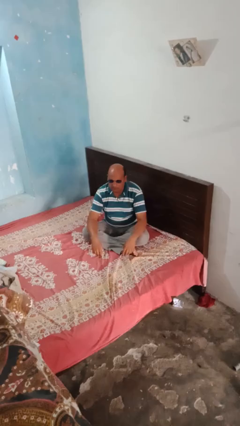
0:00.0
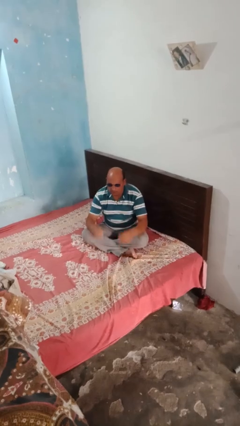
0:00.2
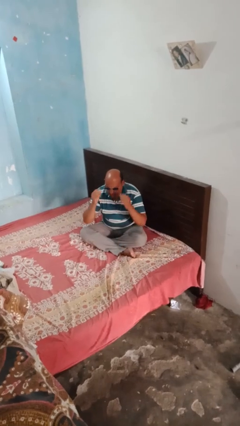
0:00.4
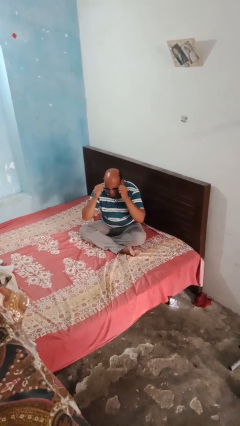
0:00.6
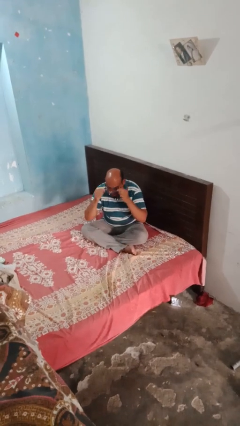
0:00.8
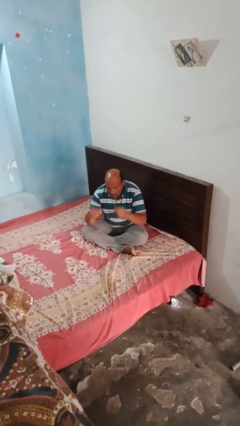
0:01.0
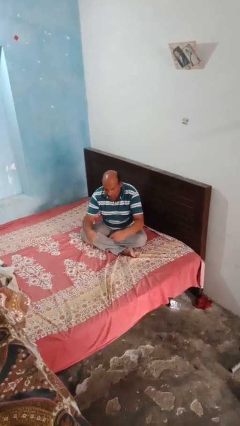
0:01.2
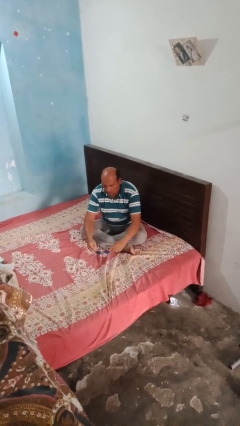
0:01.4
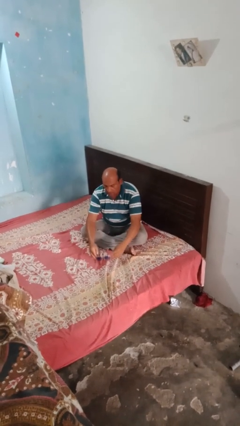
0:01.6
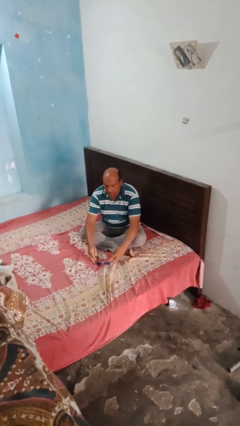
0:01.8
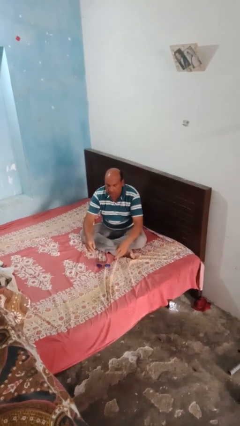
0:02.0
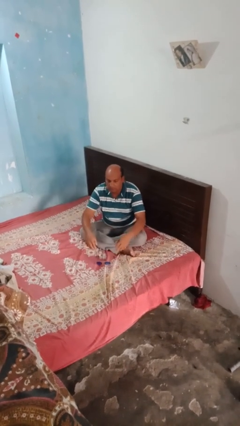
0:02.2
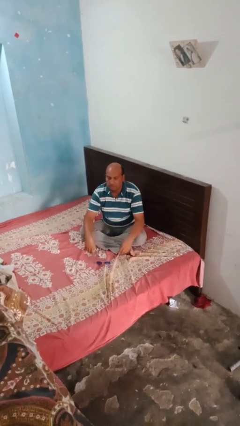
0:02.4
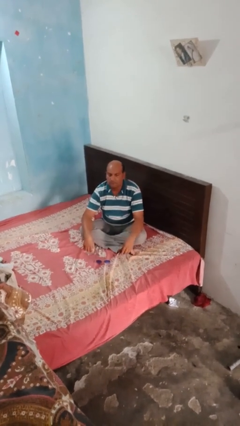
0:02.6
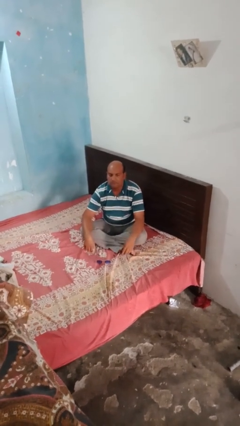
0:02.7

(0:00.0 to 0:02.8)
person takes off sunglasses

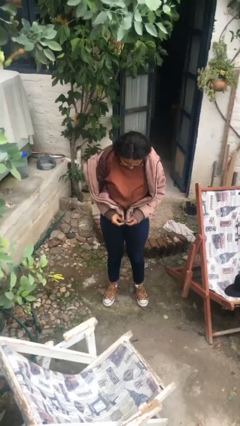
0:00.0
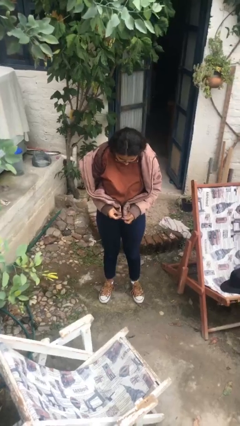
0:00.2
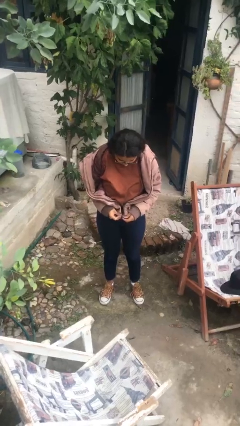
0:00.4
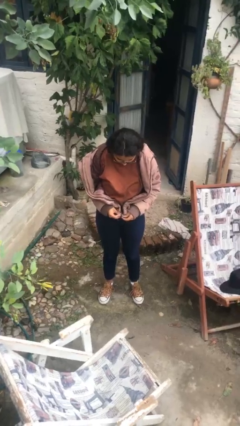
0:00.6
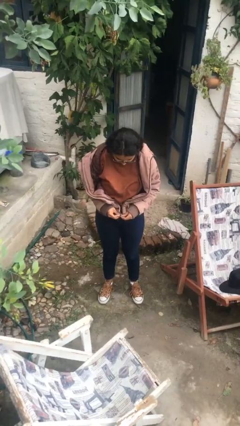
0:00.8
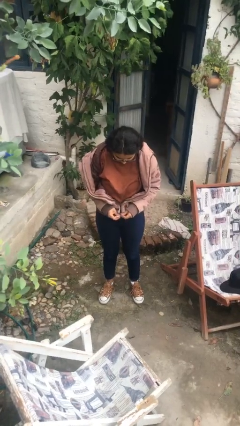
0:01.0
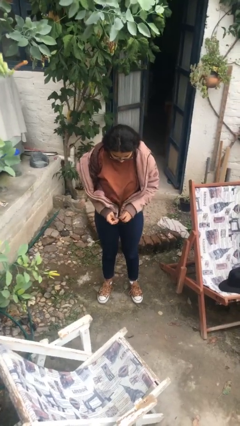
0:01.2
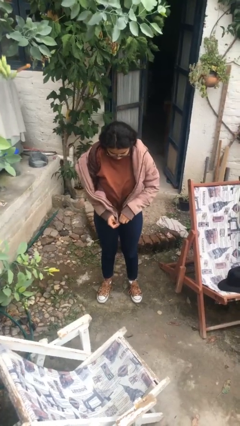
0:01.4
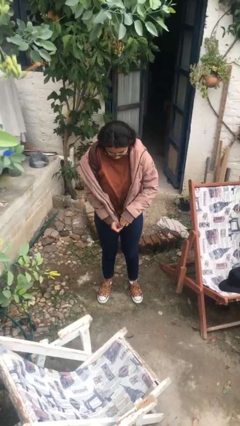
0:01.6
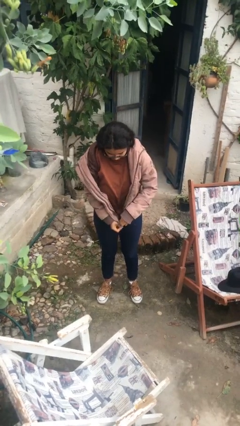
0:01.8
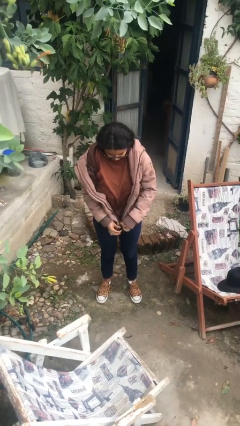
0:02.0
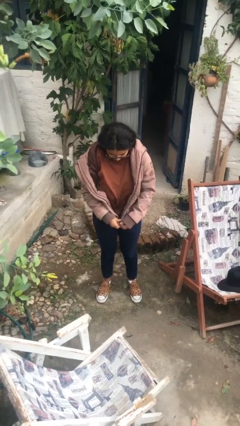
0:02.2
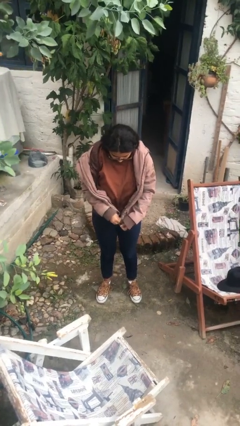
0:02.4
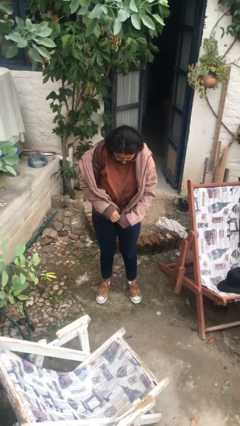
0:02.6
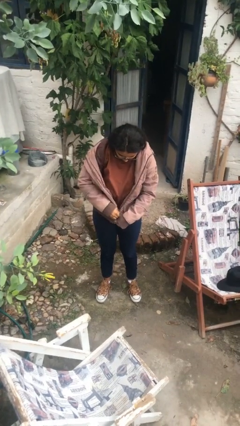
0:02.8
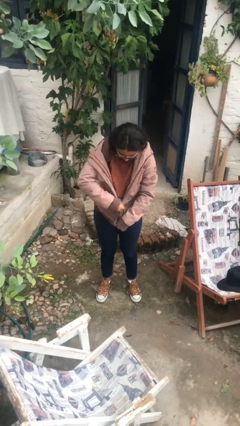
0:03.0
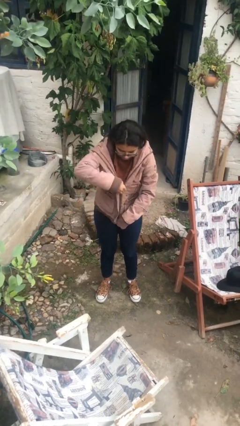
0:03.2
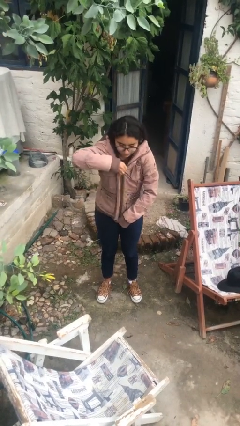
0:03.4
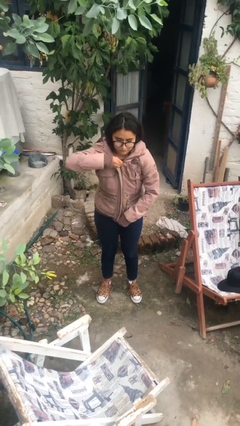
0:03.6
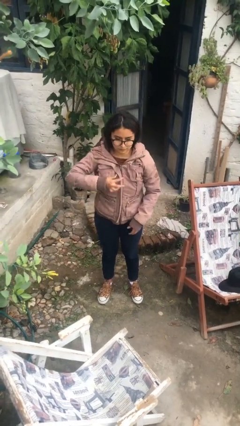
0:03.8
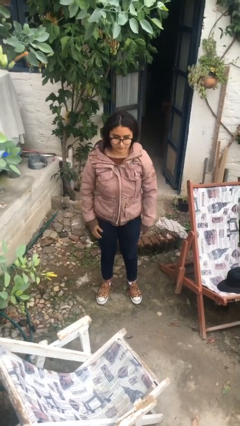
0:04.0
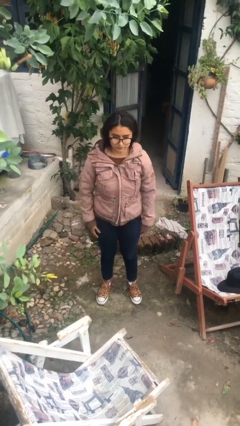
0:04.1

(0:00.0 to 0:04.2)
person zips up jacket

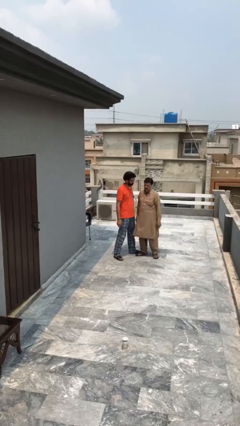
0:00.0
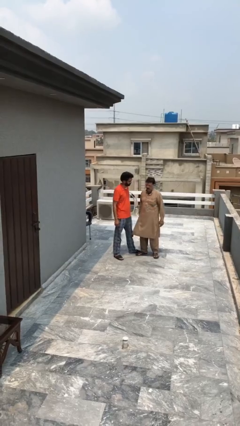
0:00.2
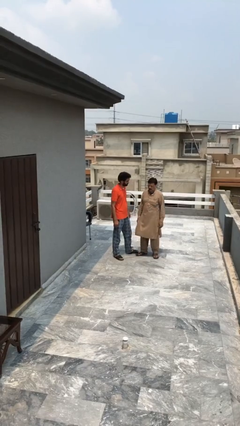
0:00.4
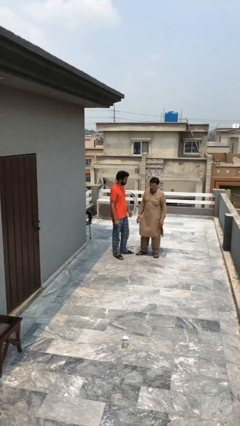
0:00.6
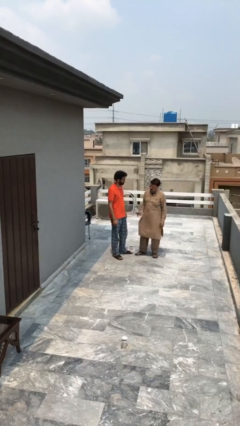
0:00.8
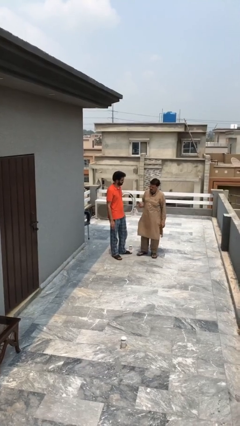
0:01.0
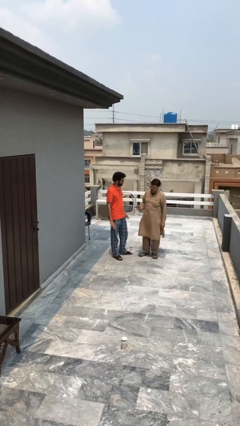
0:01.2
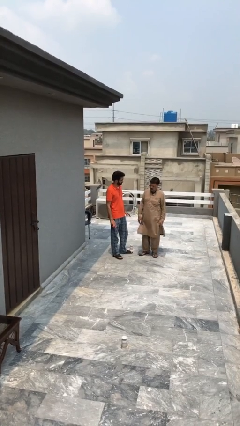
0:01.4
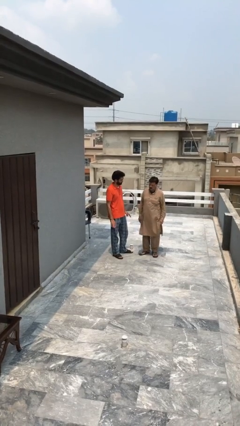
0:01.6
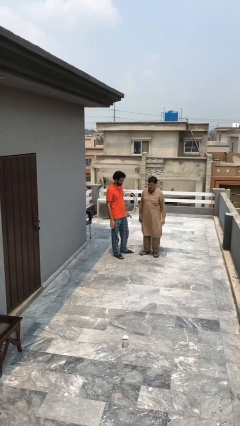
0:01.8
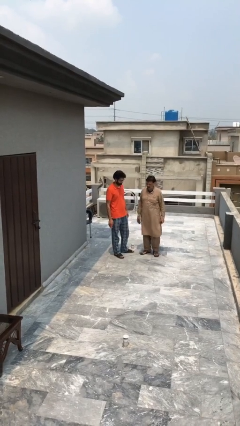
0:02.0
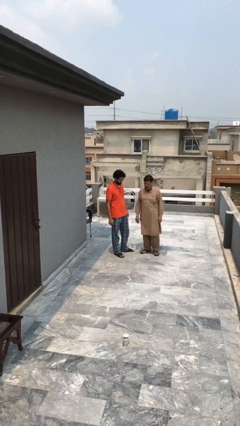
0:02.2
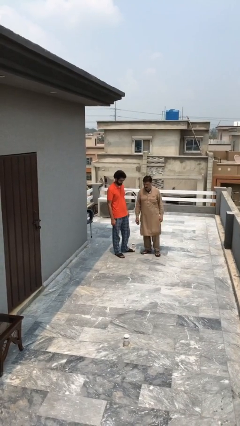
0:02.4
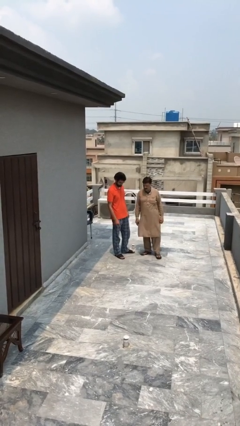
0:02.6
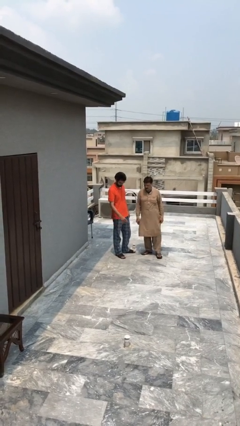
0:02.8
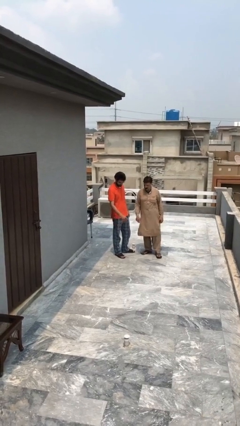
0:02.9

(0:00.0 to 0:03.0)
person talks to person

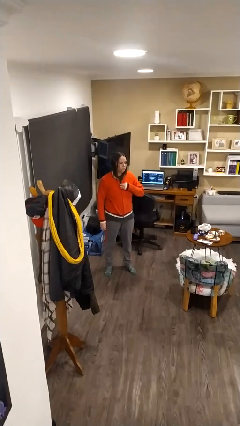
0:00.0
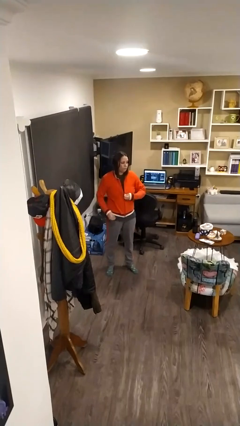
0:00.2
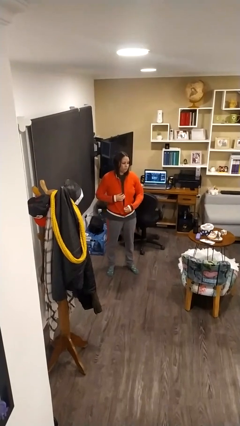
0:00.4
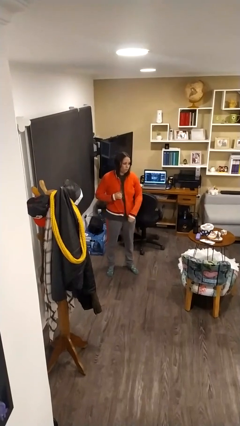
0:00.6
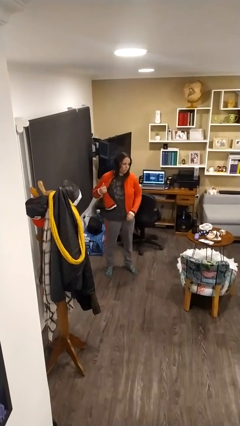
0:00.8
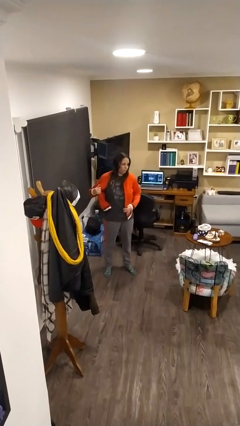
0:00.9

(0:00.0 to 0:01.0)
person unzips jacket

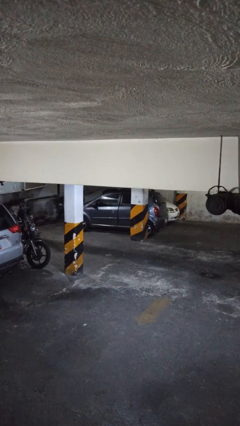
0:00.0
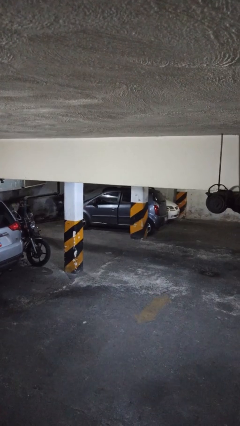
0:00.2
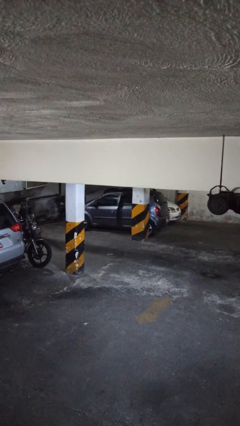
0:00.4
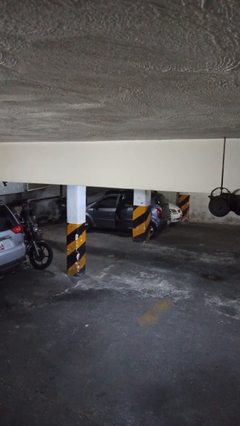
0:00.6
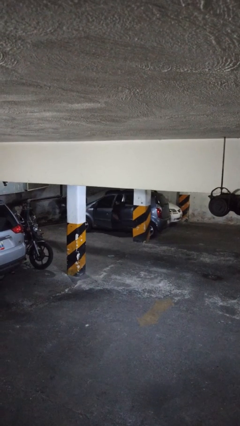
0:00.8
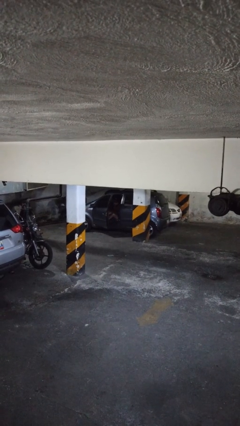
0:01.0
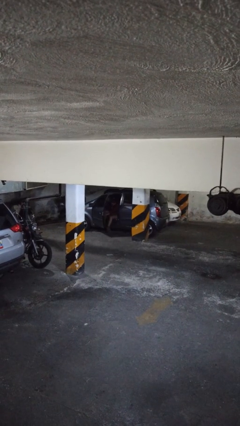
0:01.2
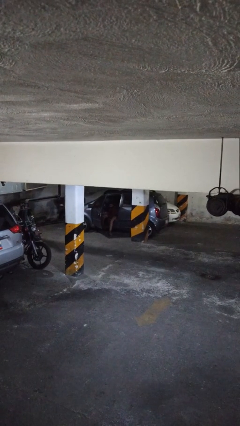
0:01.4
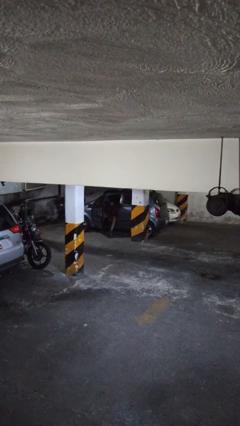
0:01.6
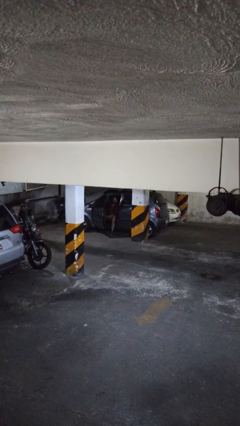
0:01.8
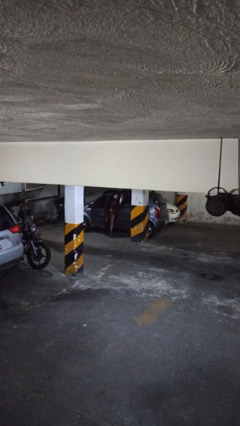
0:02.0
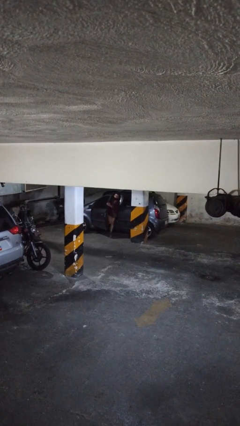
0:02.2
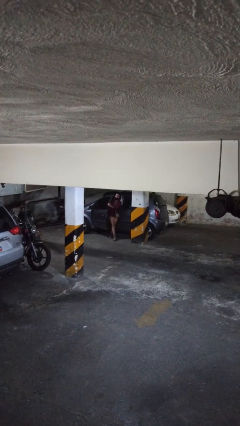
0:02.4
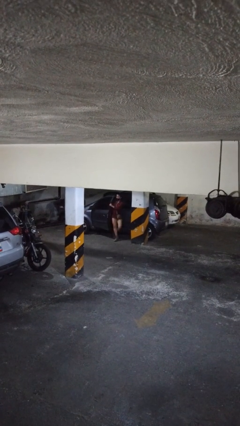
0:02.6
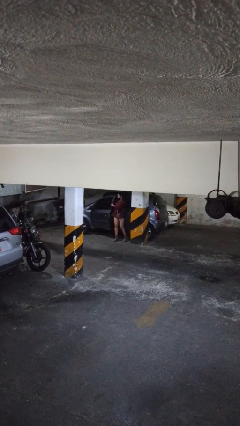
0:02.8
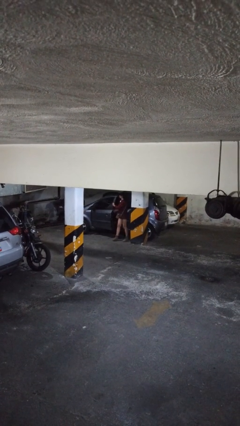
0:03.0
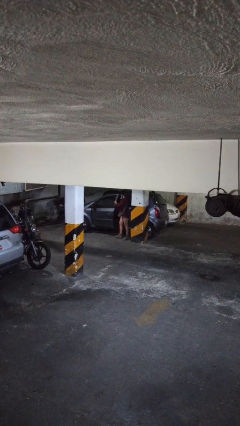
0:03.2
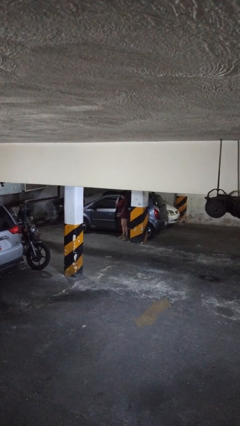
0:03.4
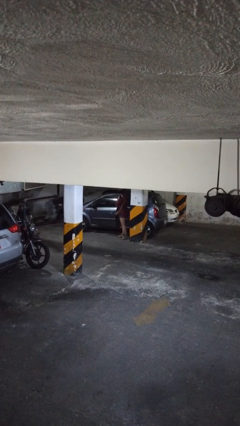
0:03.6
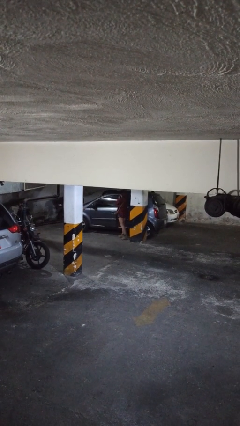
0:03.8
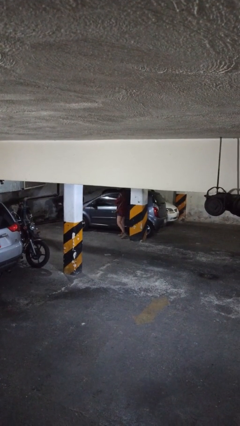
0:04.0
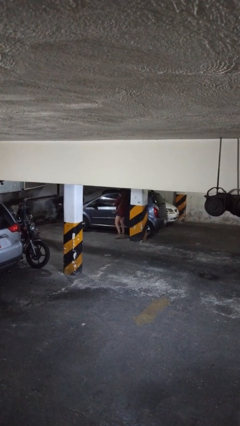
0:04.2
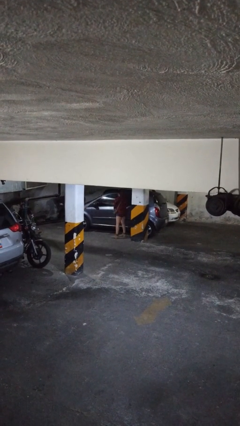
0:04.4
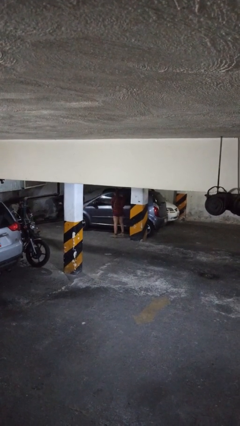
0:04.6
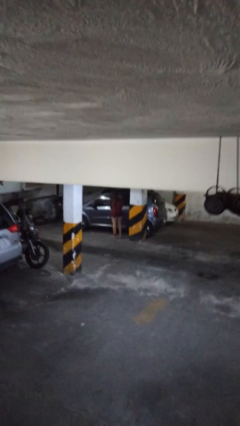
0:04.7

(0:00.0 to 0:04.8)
car drops off person

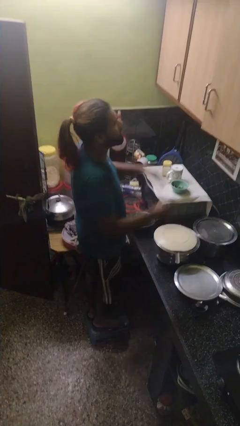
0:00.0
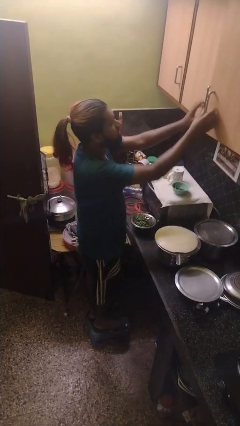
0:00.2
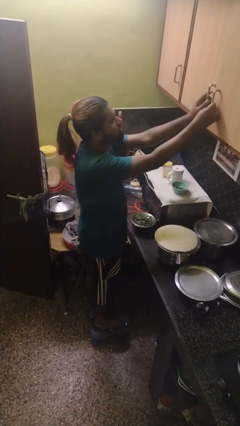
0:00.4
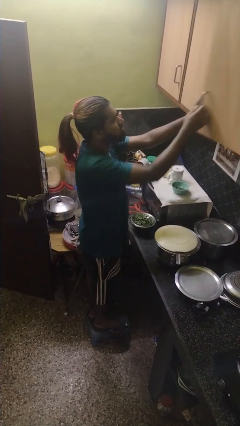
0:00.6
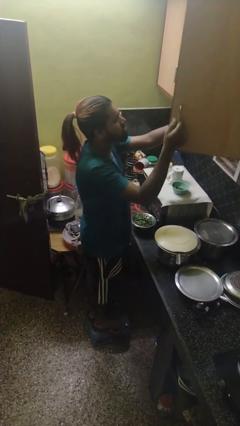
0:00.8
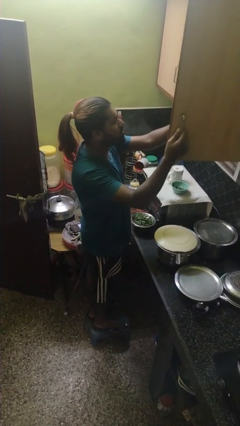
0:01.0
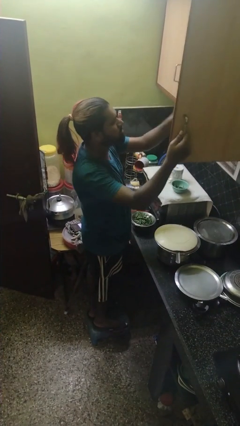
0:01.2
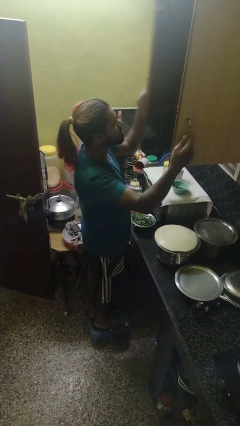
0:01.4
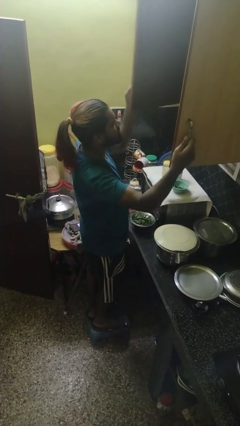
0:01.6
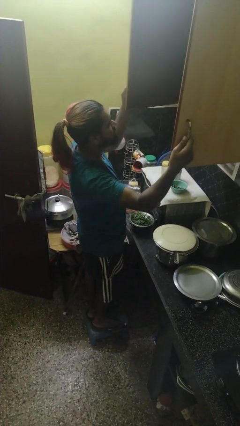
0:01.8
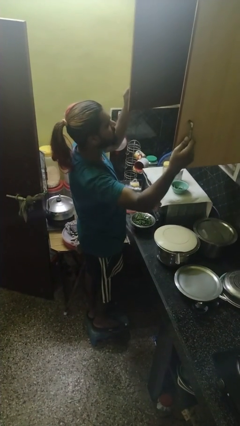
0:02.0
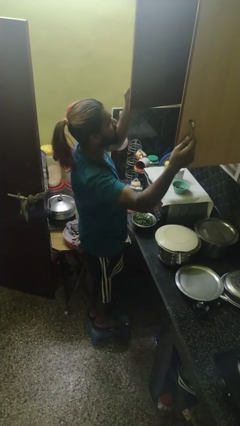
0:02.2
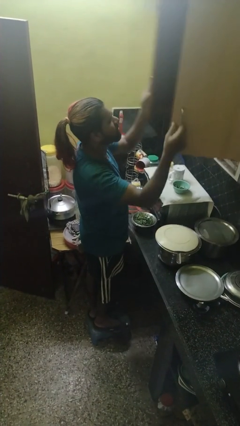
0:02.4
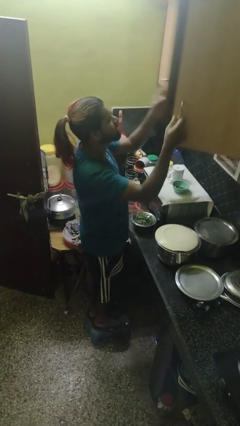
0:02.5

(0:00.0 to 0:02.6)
person opens cabinet
